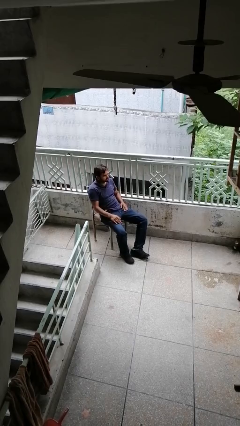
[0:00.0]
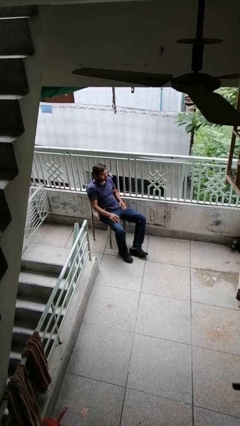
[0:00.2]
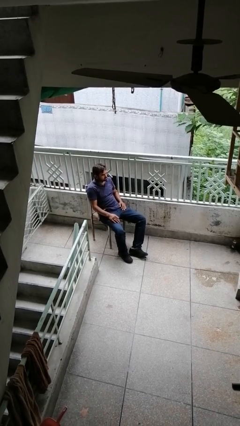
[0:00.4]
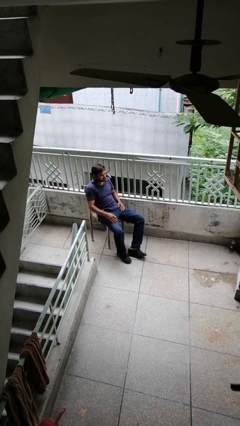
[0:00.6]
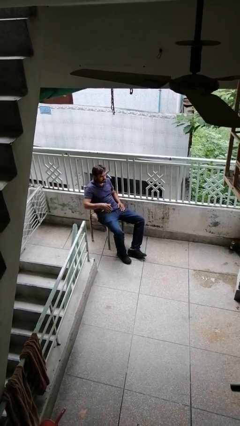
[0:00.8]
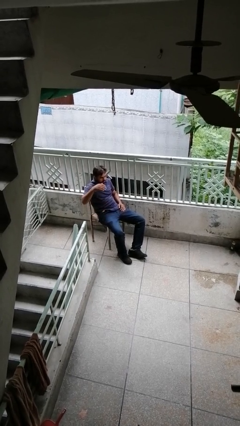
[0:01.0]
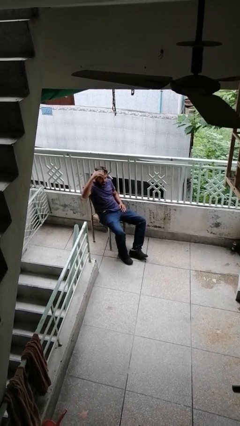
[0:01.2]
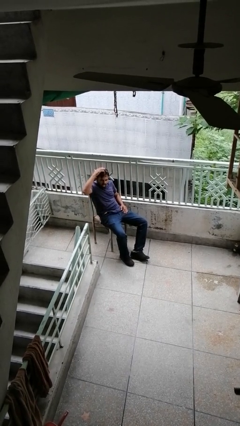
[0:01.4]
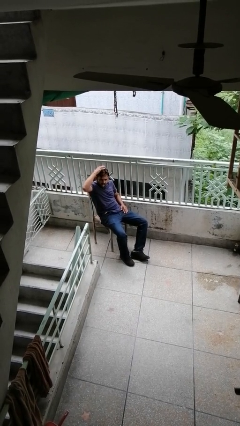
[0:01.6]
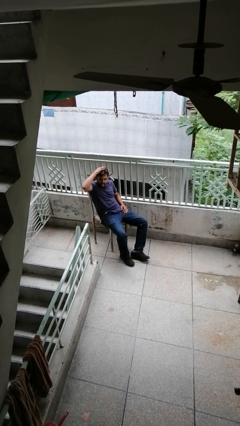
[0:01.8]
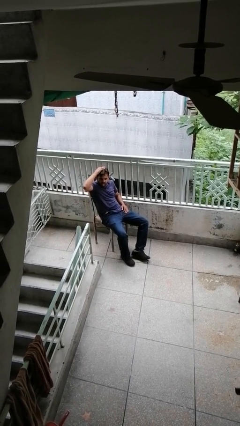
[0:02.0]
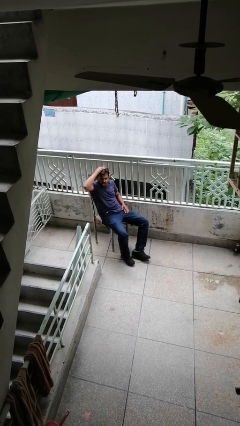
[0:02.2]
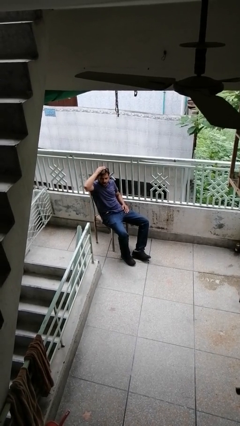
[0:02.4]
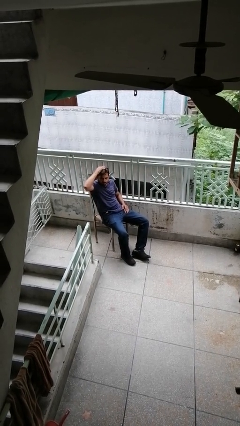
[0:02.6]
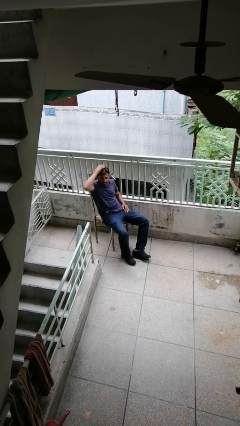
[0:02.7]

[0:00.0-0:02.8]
person pats head

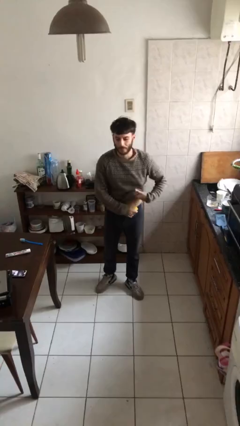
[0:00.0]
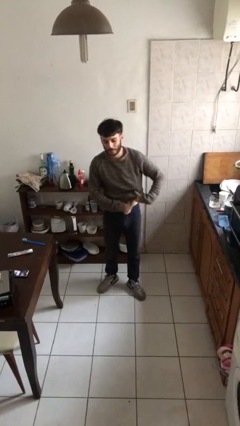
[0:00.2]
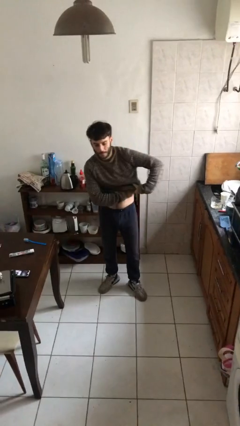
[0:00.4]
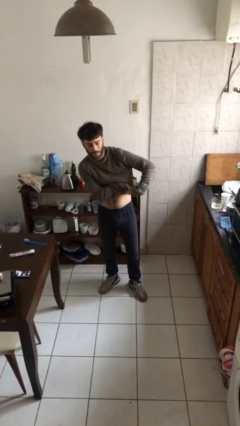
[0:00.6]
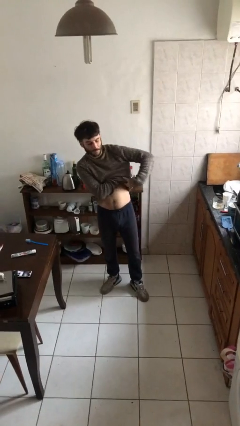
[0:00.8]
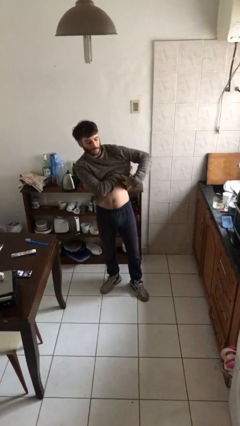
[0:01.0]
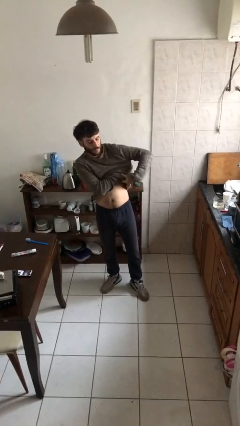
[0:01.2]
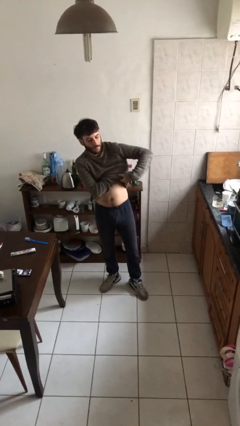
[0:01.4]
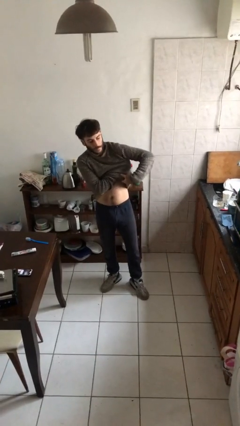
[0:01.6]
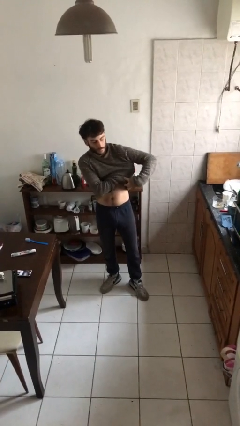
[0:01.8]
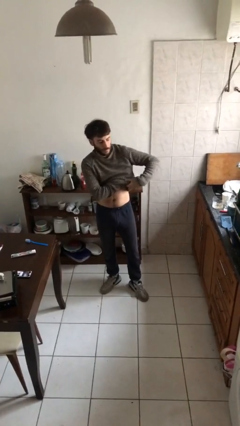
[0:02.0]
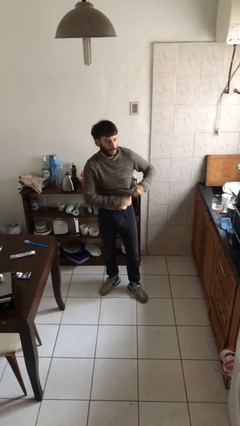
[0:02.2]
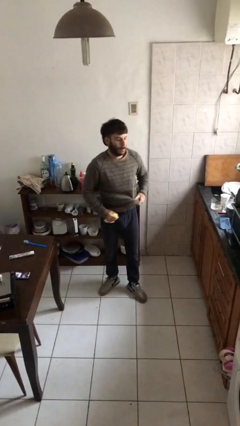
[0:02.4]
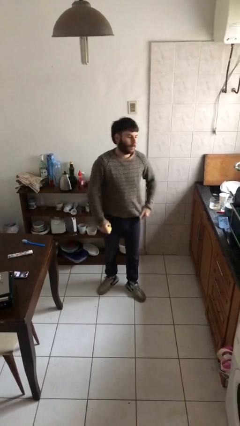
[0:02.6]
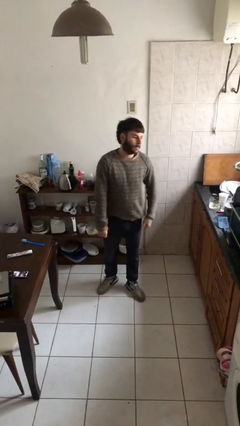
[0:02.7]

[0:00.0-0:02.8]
person applies deodorant

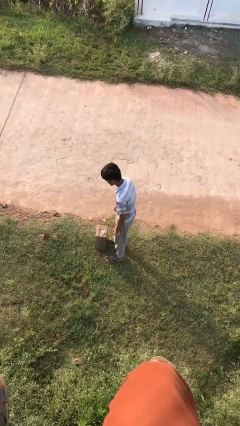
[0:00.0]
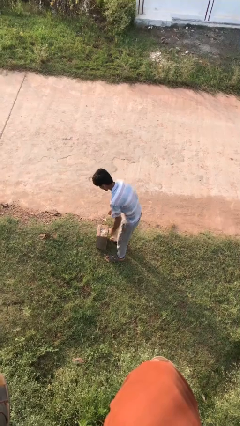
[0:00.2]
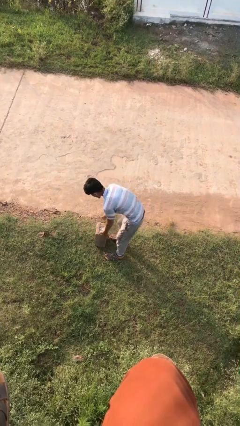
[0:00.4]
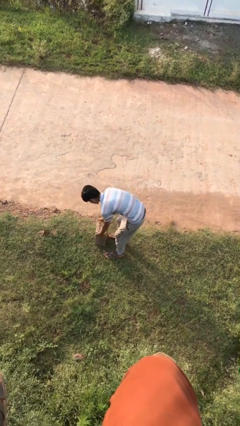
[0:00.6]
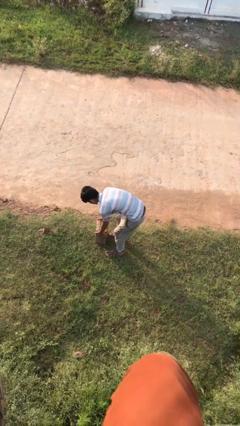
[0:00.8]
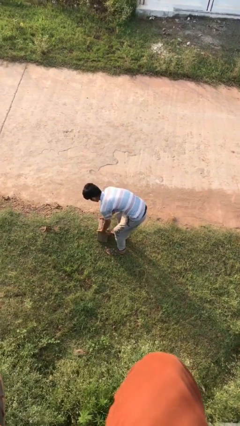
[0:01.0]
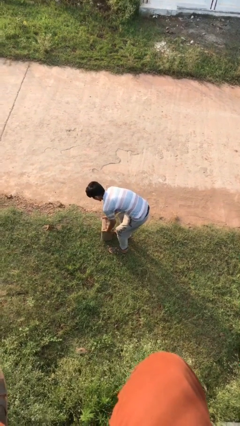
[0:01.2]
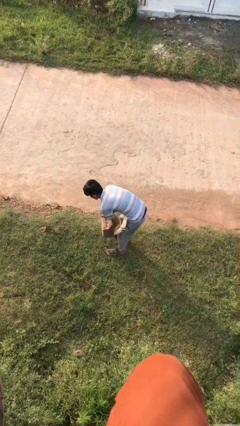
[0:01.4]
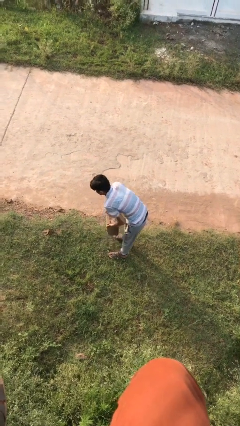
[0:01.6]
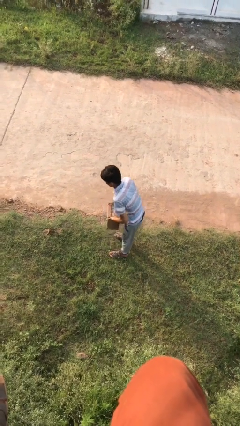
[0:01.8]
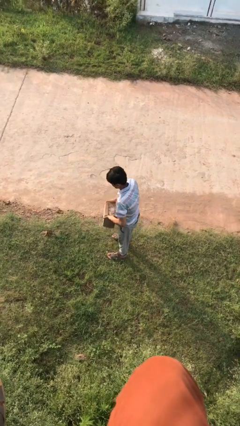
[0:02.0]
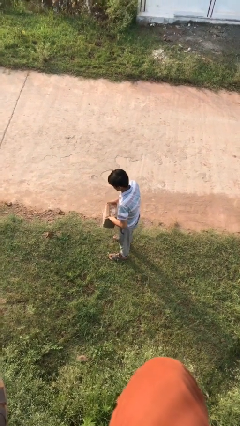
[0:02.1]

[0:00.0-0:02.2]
person picks up object from floor

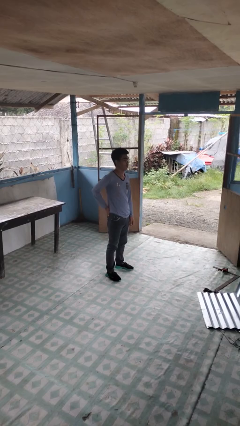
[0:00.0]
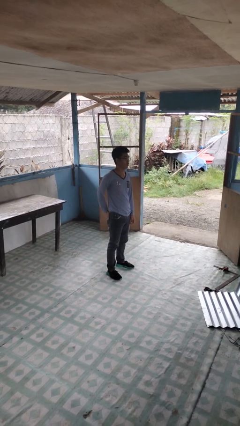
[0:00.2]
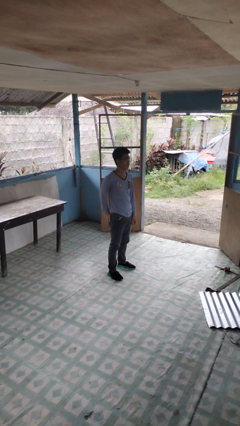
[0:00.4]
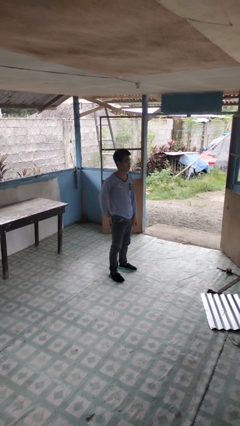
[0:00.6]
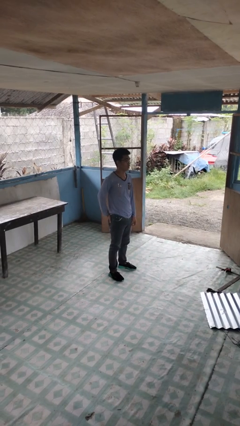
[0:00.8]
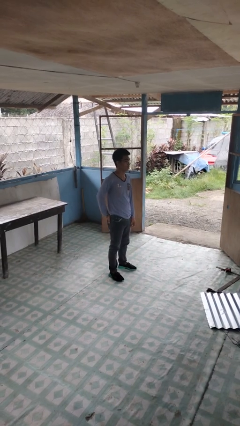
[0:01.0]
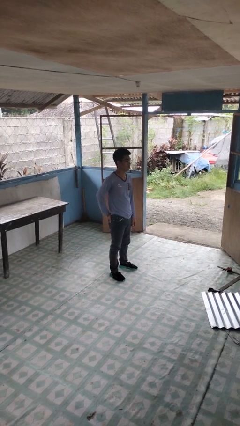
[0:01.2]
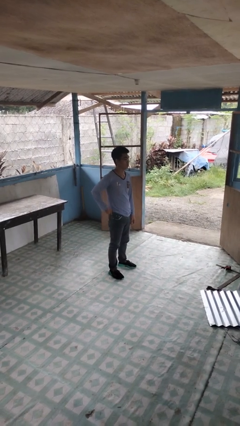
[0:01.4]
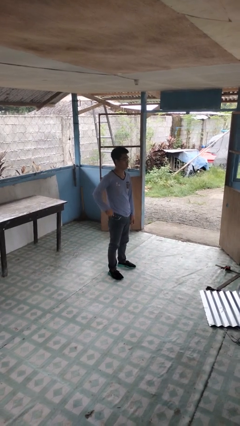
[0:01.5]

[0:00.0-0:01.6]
person puts hands in back pockets

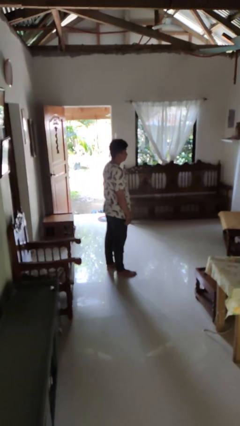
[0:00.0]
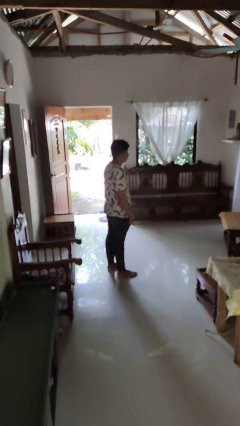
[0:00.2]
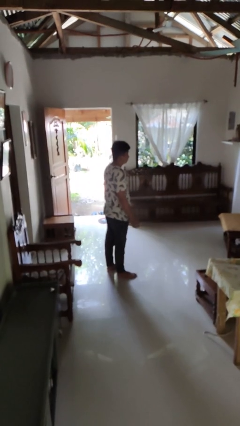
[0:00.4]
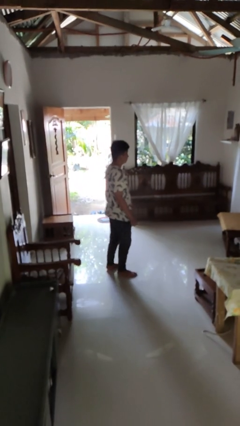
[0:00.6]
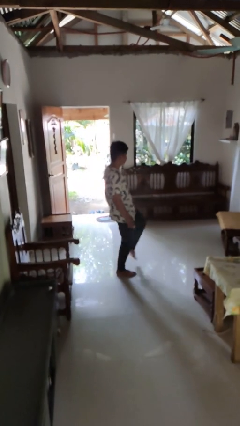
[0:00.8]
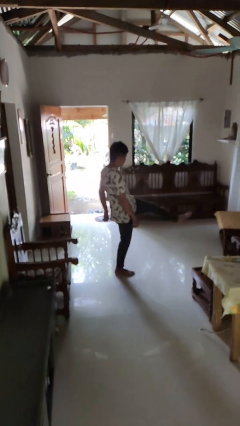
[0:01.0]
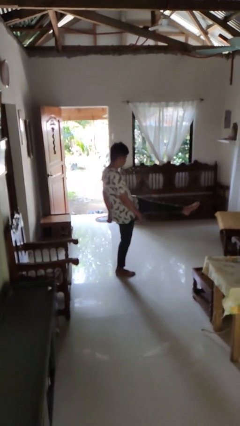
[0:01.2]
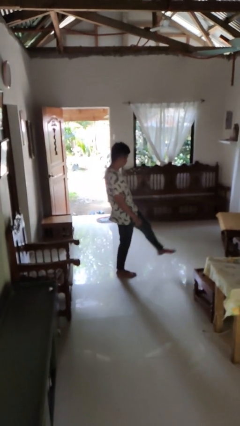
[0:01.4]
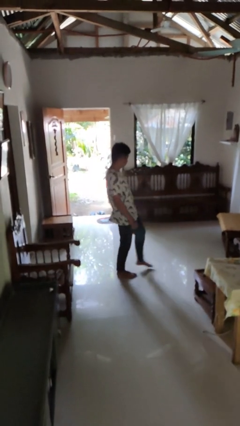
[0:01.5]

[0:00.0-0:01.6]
person karate kicks

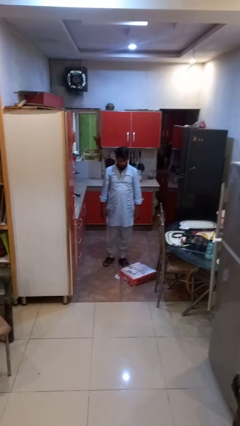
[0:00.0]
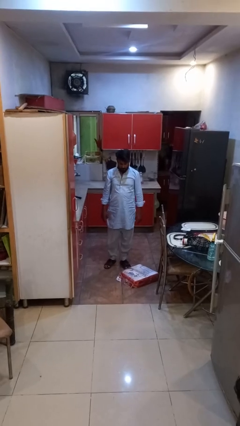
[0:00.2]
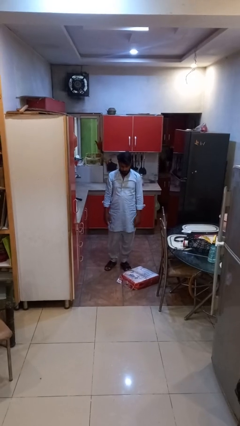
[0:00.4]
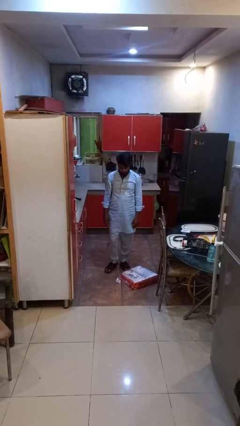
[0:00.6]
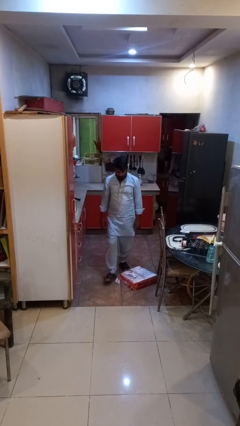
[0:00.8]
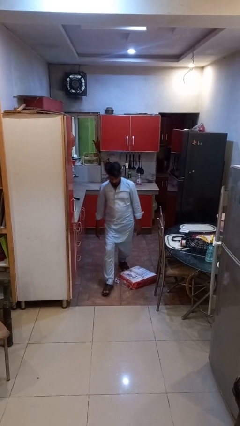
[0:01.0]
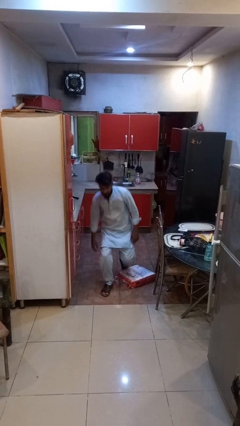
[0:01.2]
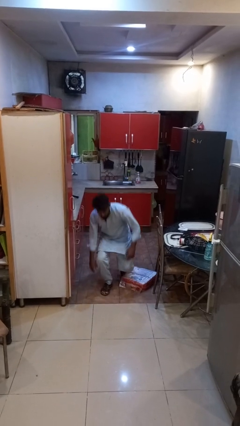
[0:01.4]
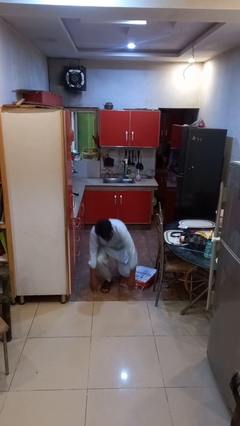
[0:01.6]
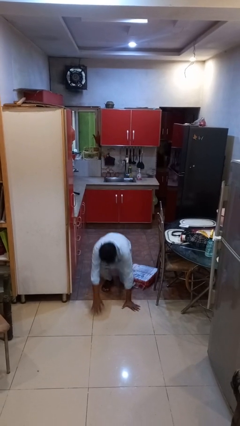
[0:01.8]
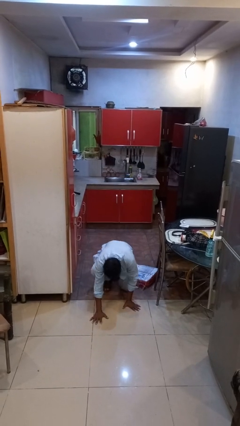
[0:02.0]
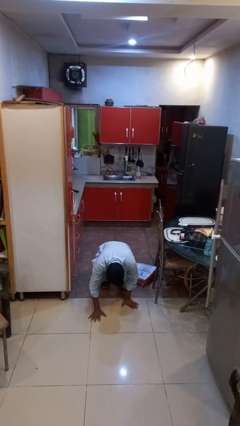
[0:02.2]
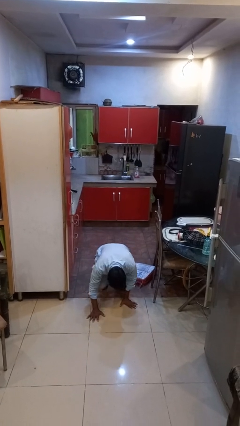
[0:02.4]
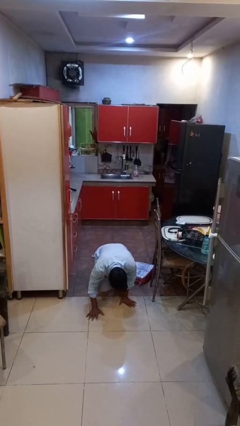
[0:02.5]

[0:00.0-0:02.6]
person trips on object on floor

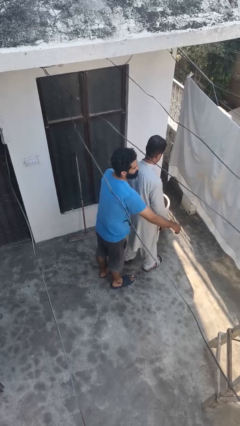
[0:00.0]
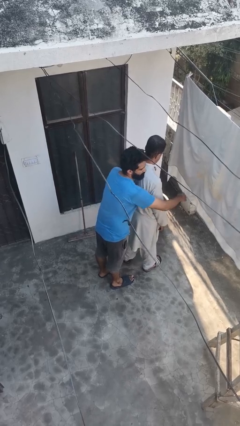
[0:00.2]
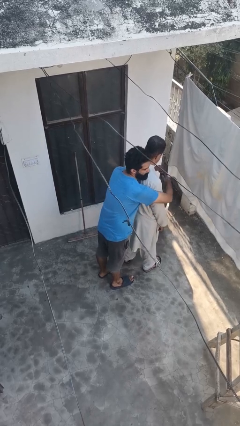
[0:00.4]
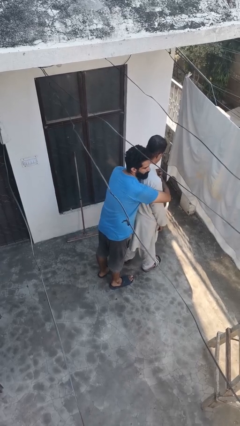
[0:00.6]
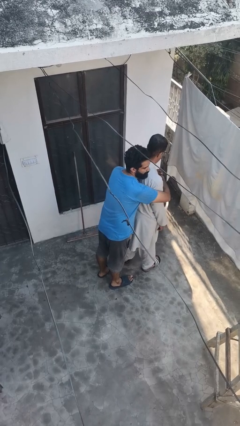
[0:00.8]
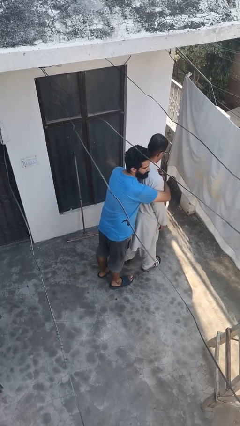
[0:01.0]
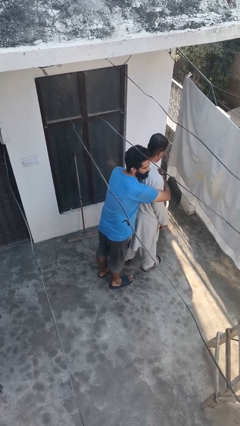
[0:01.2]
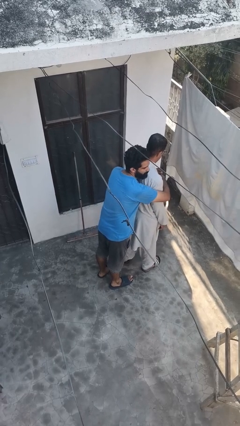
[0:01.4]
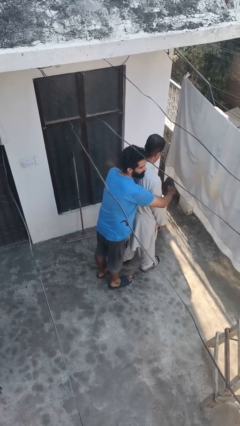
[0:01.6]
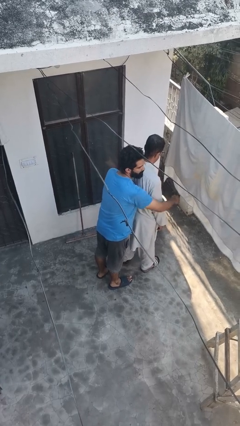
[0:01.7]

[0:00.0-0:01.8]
person hugs person from behind

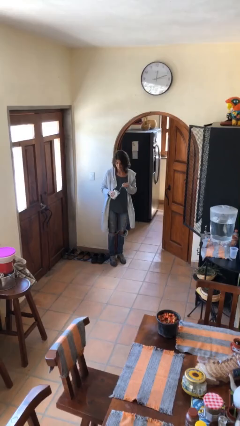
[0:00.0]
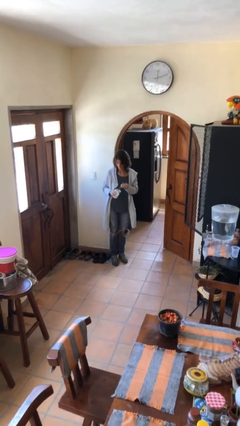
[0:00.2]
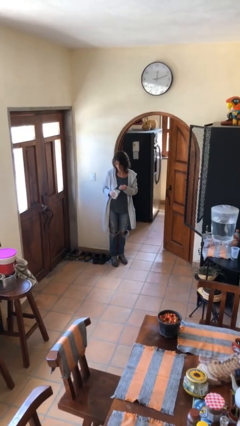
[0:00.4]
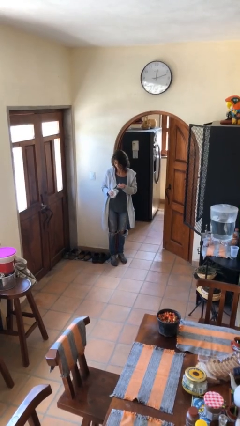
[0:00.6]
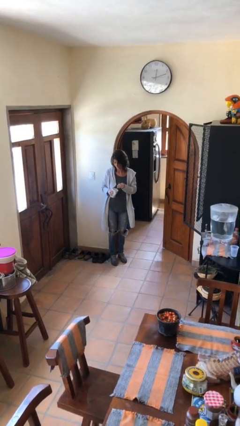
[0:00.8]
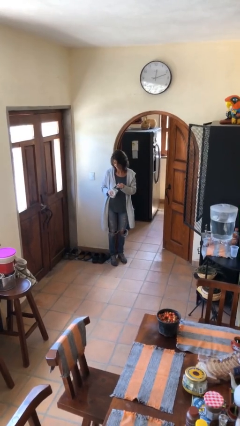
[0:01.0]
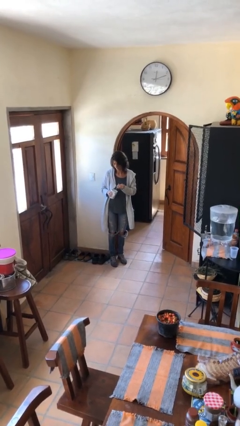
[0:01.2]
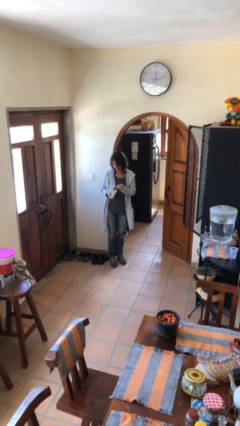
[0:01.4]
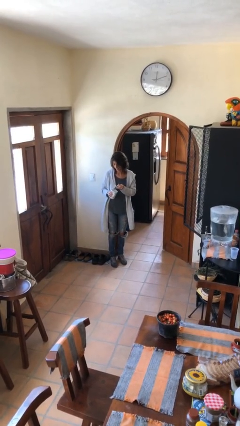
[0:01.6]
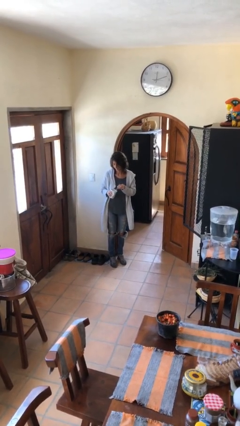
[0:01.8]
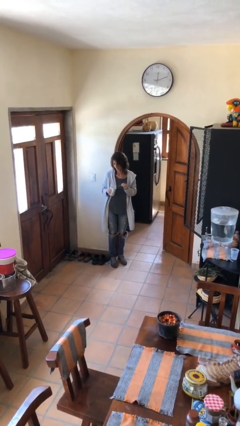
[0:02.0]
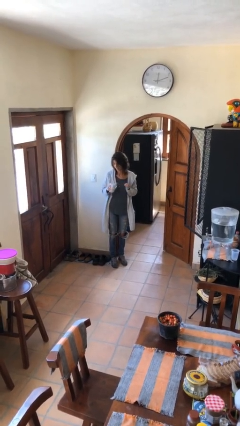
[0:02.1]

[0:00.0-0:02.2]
person stirs mug
